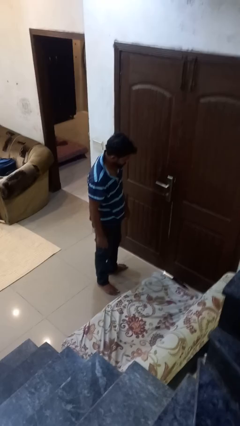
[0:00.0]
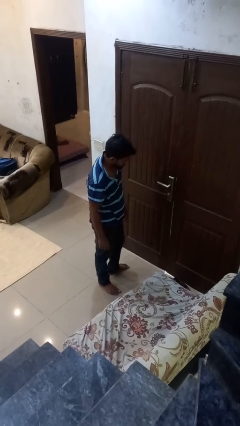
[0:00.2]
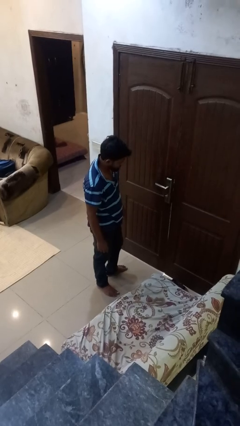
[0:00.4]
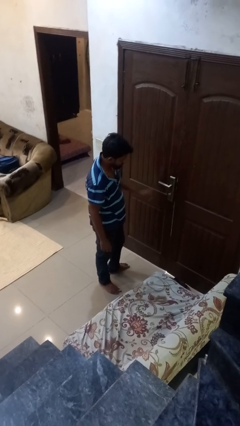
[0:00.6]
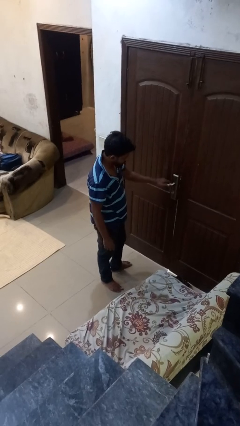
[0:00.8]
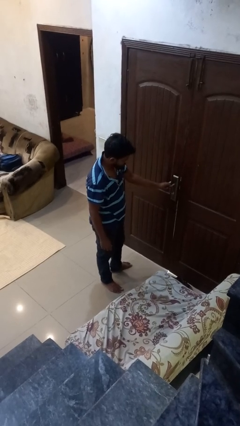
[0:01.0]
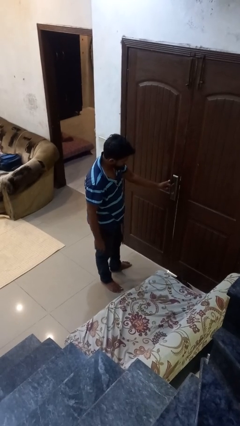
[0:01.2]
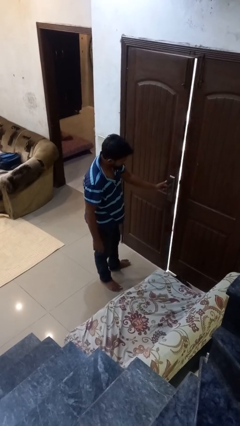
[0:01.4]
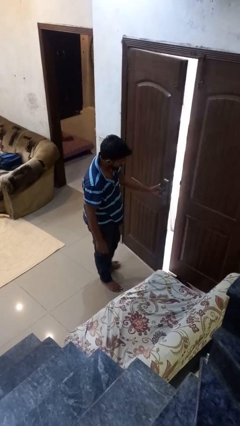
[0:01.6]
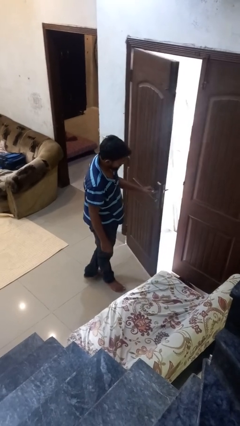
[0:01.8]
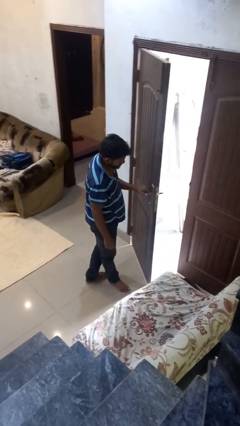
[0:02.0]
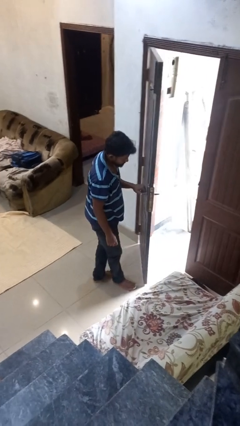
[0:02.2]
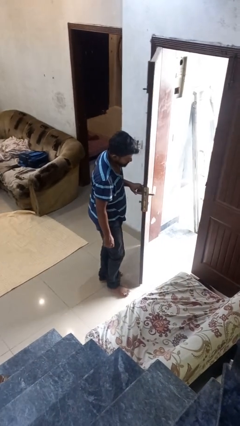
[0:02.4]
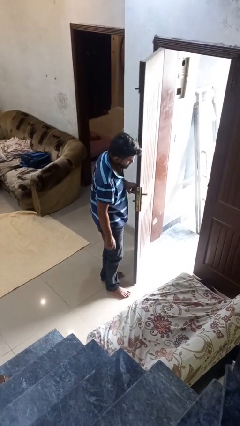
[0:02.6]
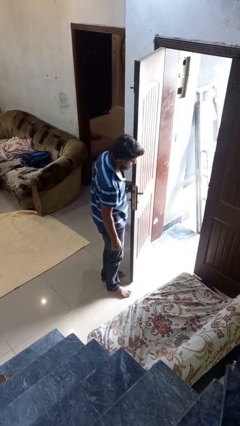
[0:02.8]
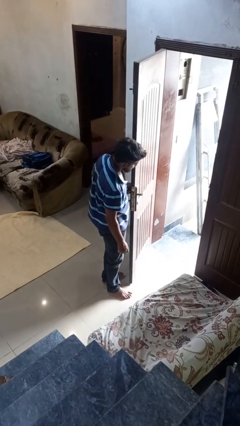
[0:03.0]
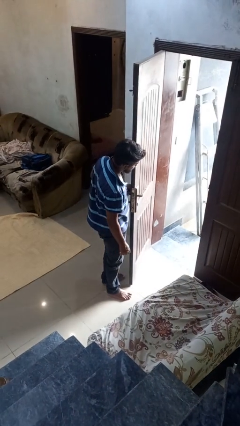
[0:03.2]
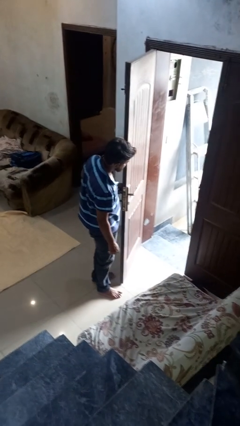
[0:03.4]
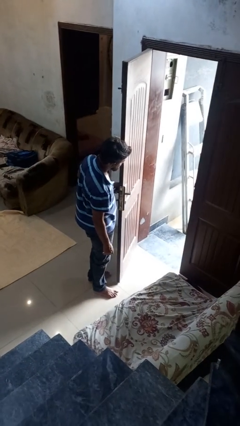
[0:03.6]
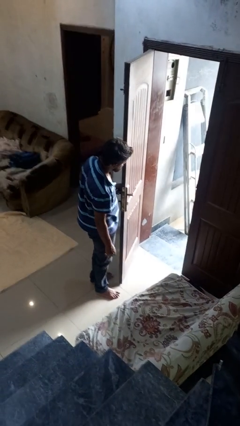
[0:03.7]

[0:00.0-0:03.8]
person opens facility door

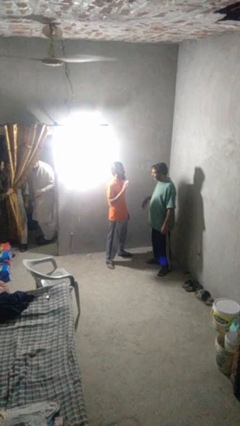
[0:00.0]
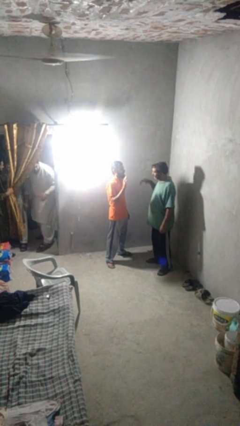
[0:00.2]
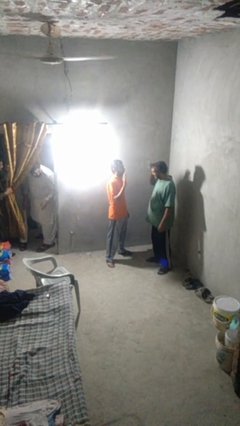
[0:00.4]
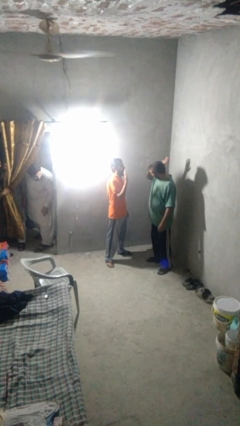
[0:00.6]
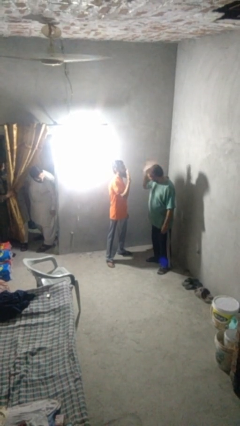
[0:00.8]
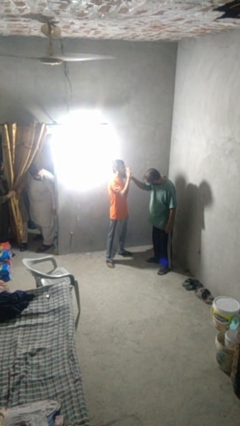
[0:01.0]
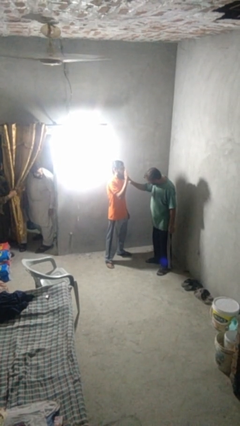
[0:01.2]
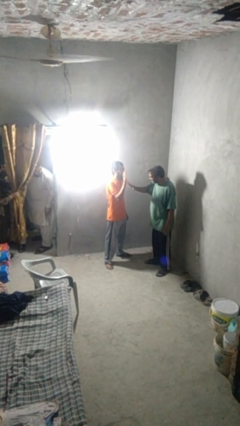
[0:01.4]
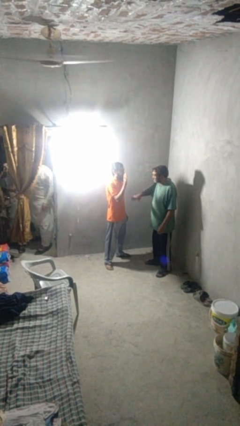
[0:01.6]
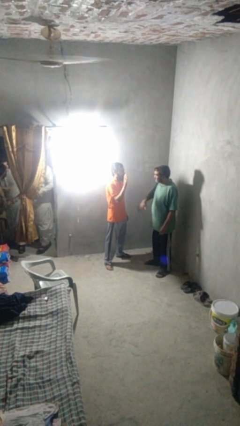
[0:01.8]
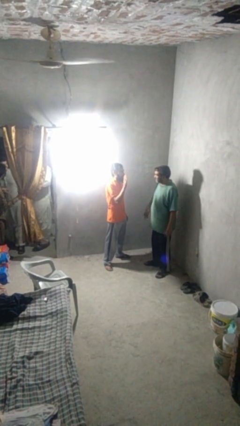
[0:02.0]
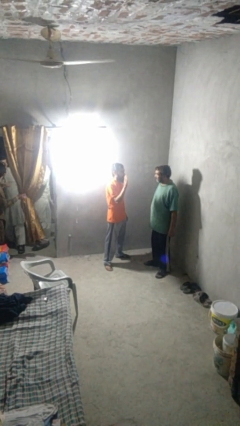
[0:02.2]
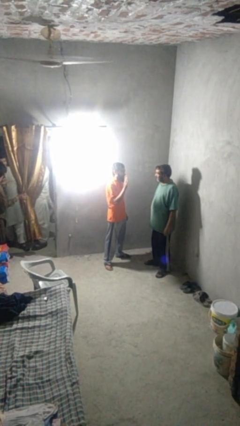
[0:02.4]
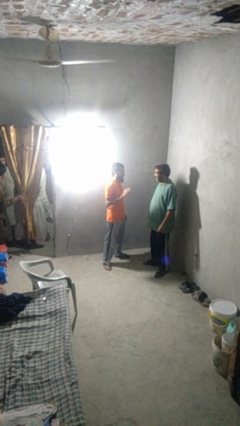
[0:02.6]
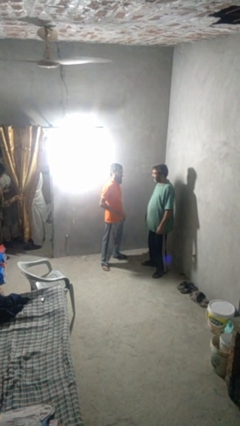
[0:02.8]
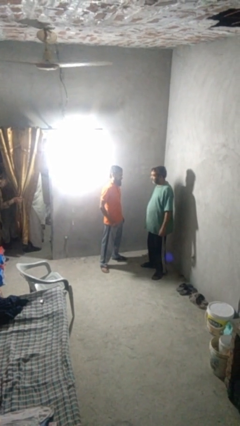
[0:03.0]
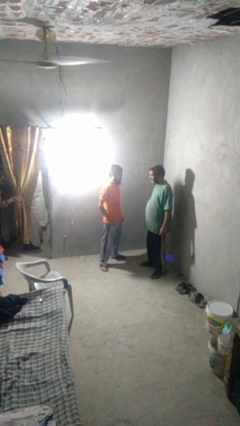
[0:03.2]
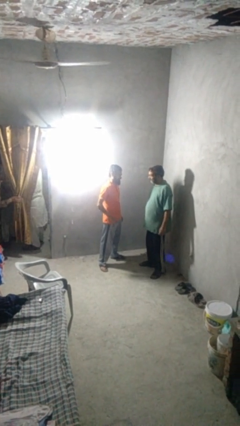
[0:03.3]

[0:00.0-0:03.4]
person highfives hand

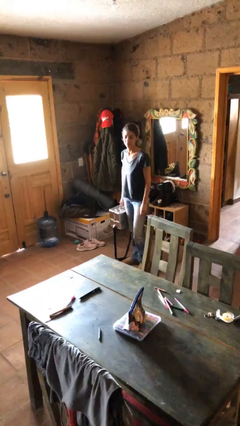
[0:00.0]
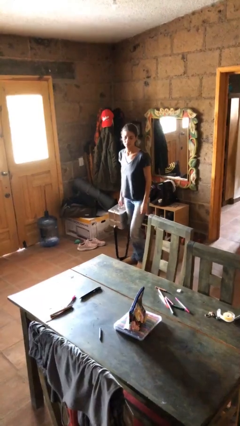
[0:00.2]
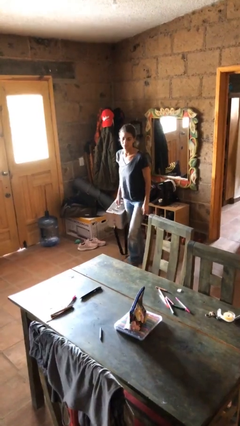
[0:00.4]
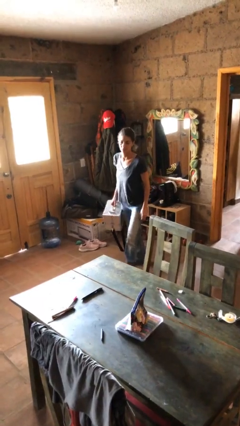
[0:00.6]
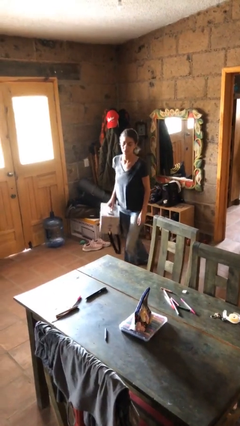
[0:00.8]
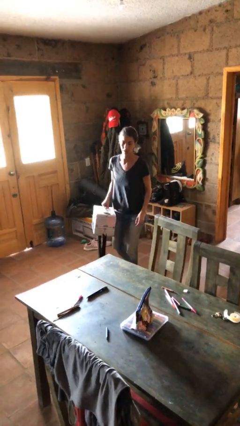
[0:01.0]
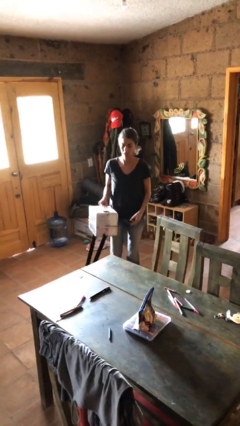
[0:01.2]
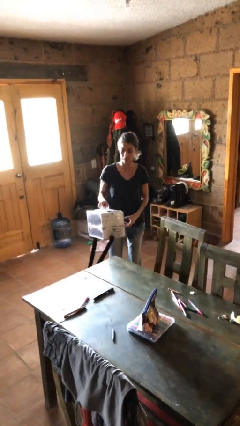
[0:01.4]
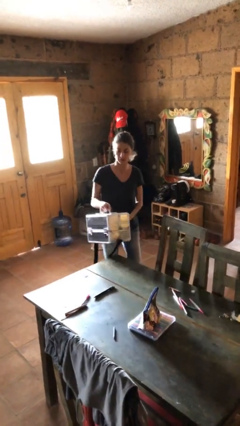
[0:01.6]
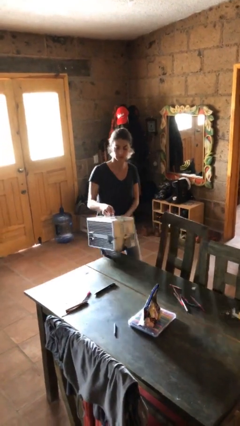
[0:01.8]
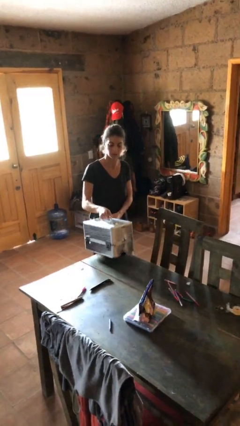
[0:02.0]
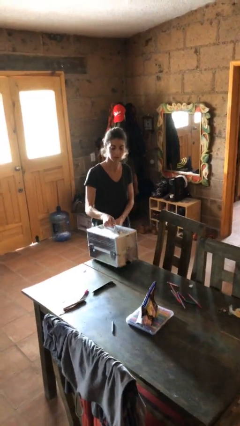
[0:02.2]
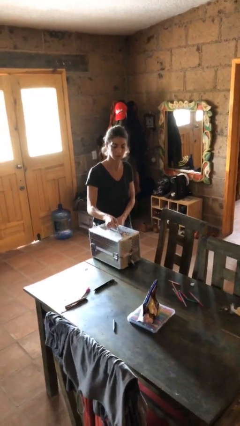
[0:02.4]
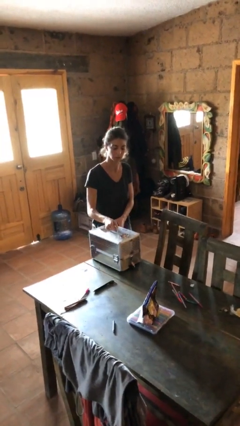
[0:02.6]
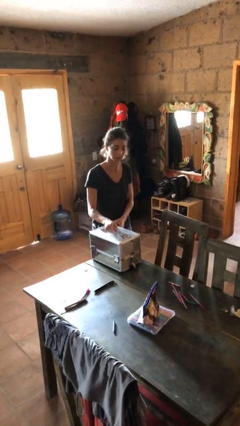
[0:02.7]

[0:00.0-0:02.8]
person puts down object on table

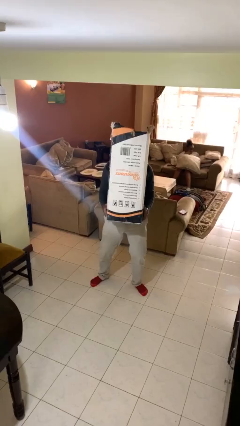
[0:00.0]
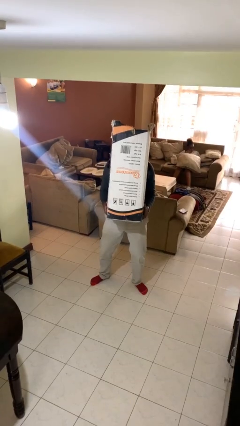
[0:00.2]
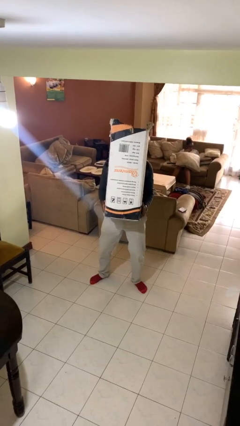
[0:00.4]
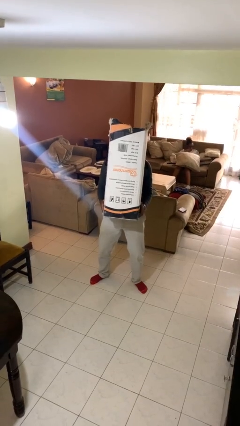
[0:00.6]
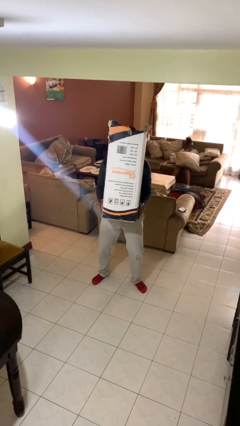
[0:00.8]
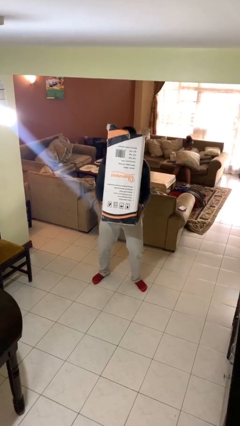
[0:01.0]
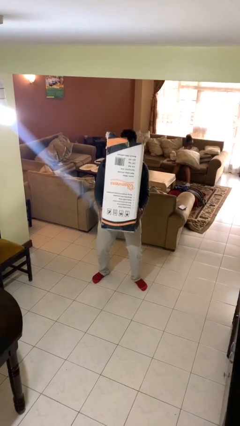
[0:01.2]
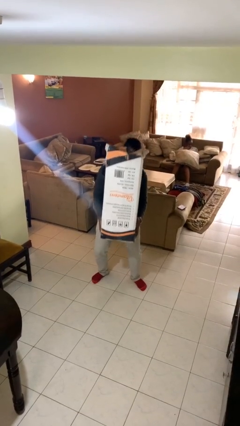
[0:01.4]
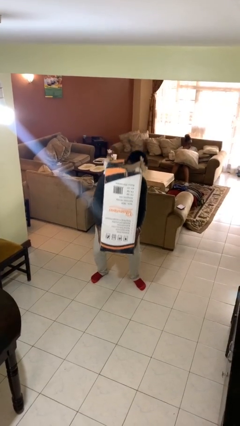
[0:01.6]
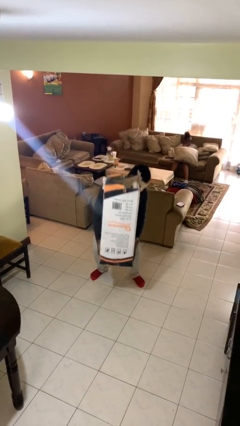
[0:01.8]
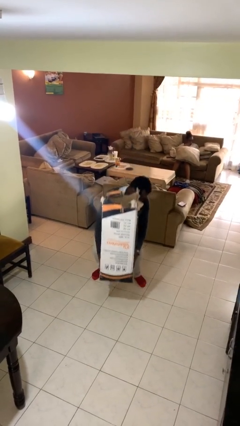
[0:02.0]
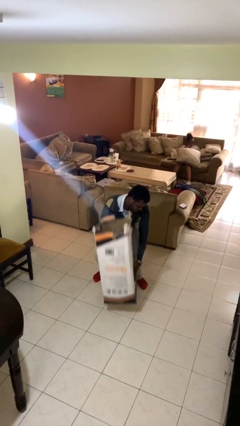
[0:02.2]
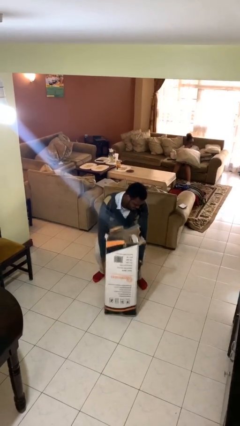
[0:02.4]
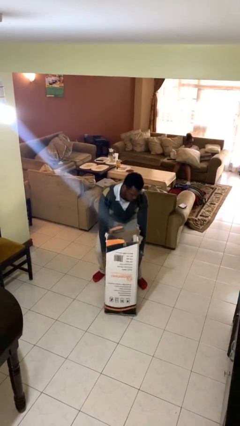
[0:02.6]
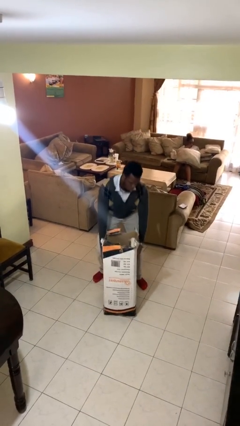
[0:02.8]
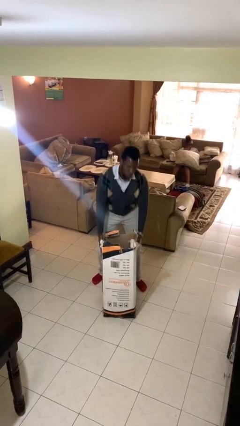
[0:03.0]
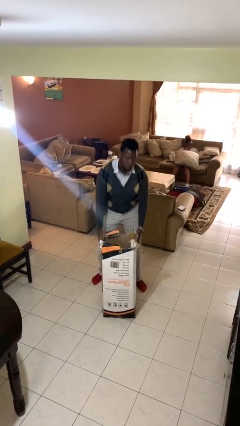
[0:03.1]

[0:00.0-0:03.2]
person puts down object on floor

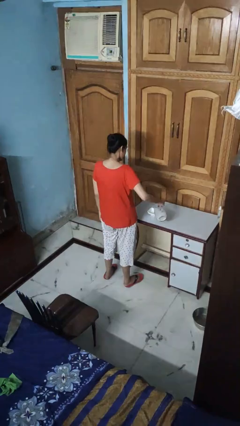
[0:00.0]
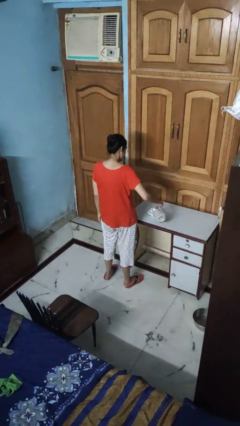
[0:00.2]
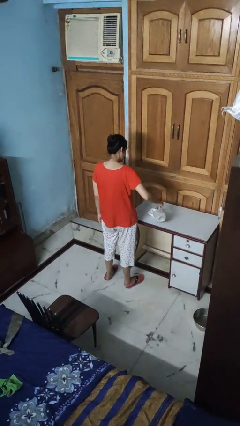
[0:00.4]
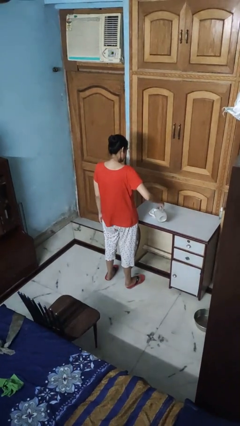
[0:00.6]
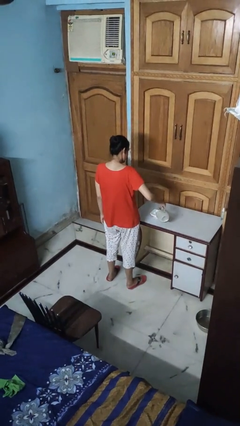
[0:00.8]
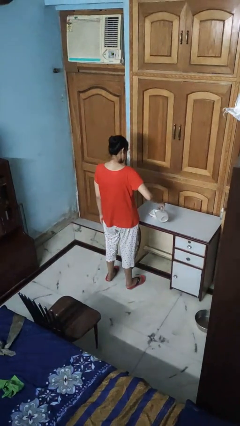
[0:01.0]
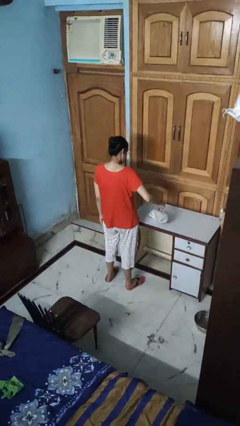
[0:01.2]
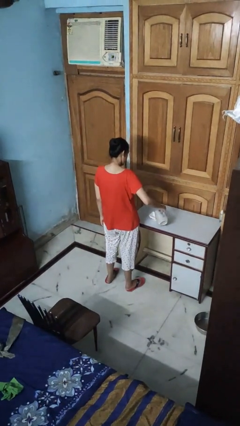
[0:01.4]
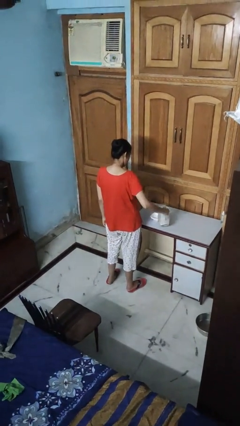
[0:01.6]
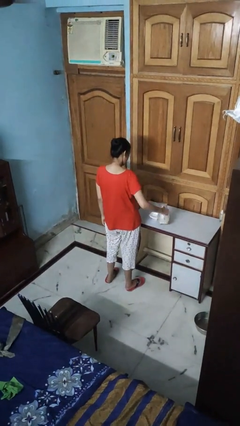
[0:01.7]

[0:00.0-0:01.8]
person pours into bowl

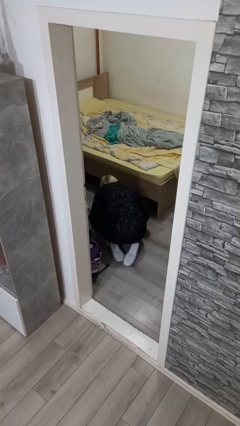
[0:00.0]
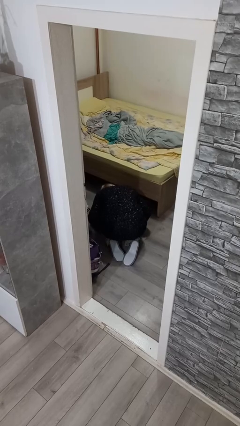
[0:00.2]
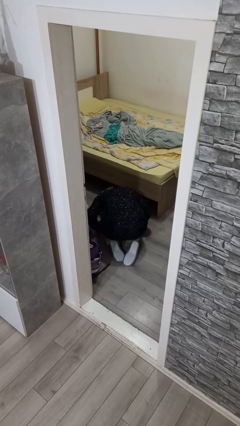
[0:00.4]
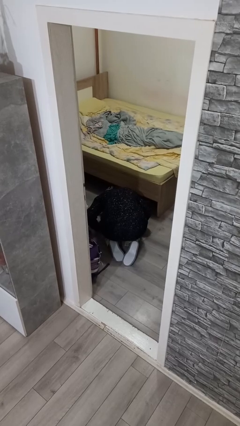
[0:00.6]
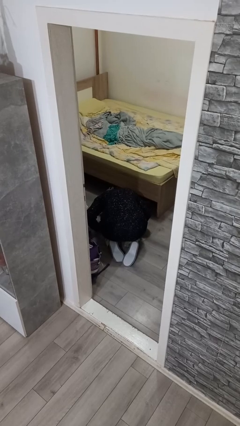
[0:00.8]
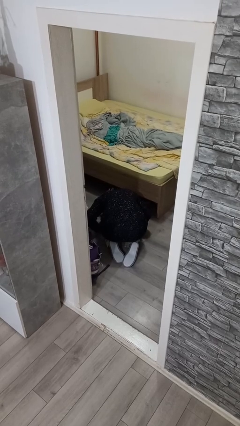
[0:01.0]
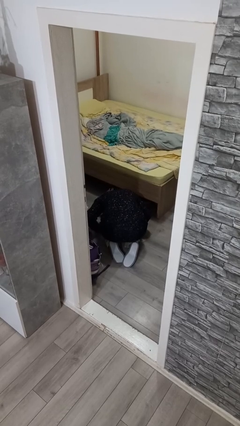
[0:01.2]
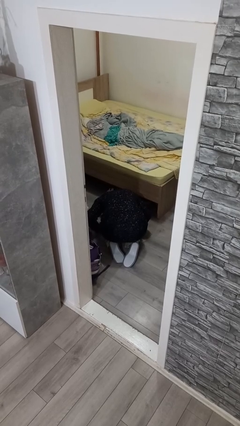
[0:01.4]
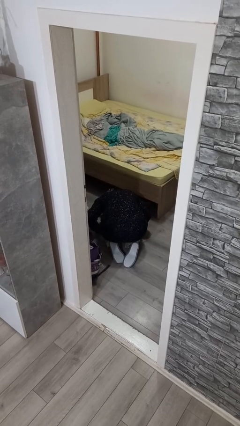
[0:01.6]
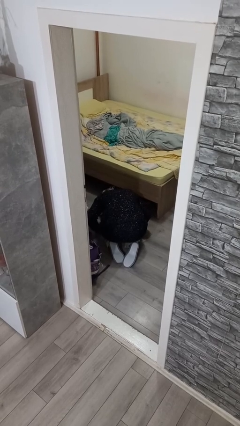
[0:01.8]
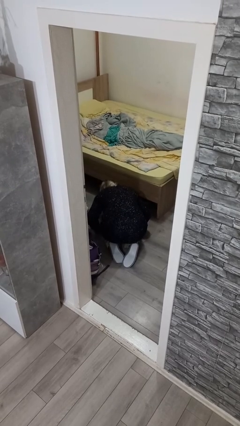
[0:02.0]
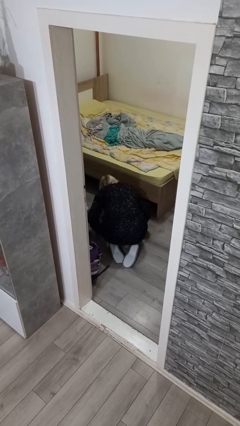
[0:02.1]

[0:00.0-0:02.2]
person searches under bed

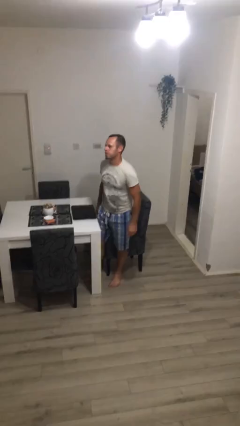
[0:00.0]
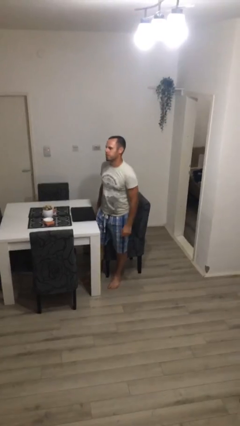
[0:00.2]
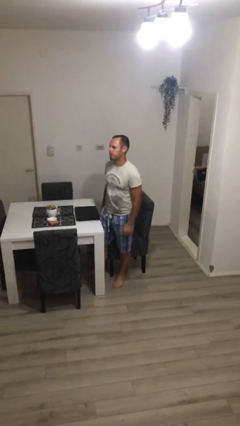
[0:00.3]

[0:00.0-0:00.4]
person stands up
